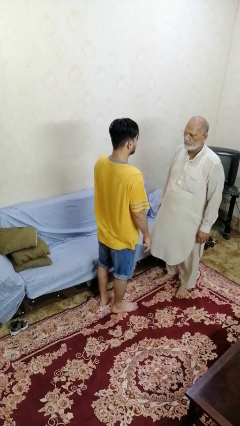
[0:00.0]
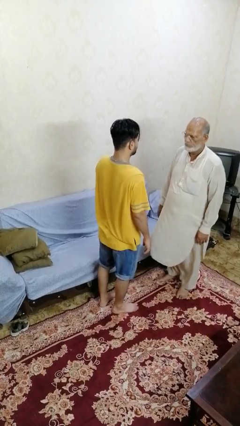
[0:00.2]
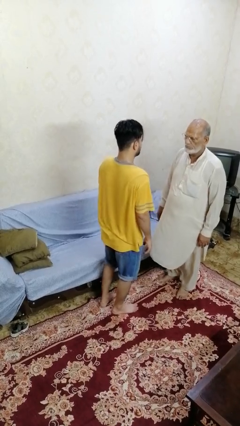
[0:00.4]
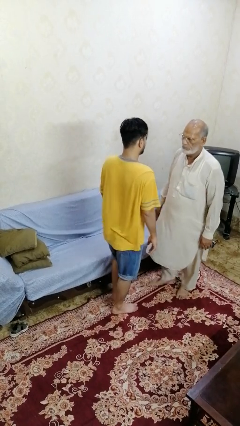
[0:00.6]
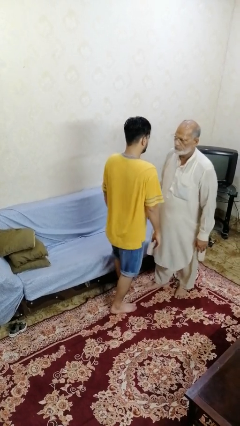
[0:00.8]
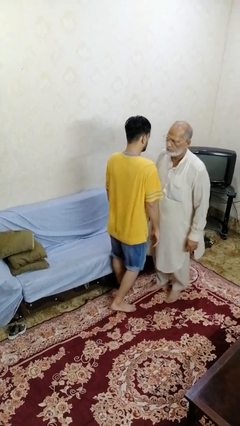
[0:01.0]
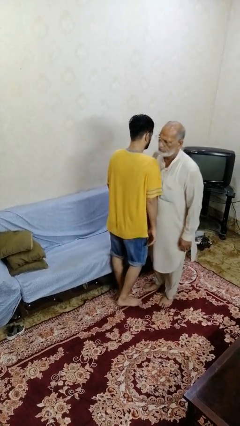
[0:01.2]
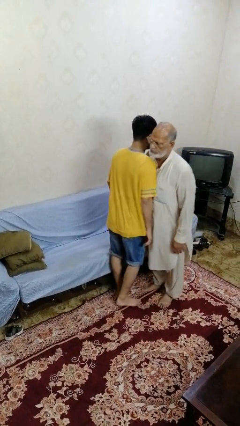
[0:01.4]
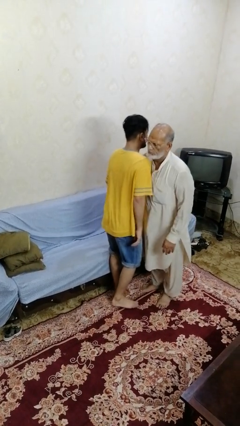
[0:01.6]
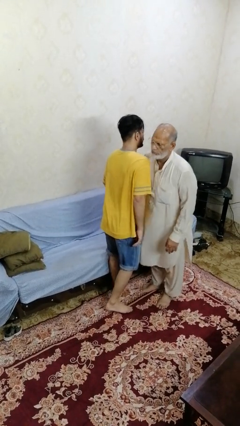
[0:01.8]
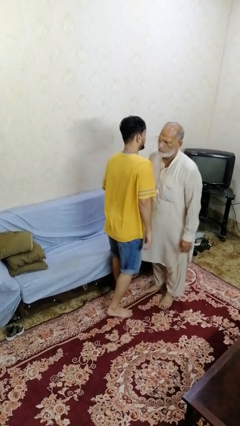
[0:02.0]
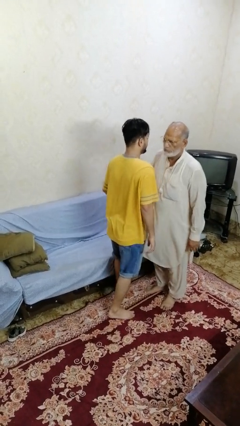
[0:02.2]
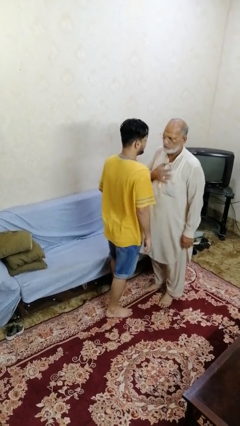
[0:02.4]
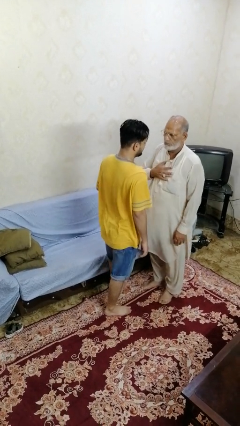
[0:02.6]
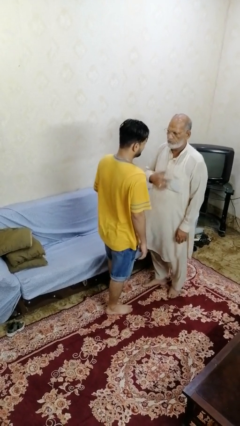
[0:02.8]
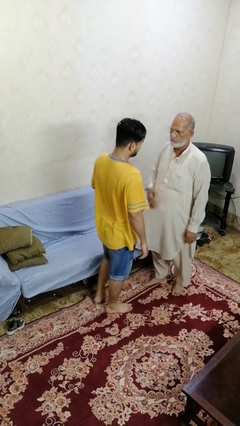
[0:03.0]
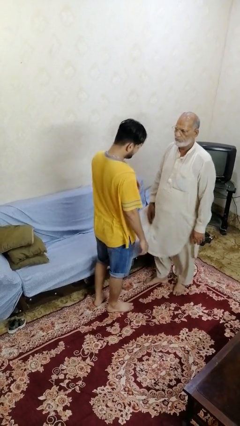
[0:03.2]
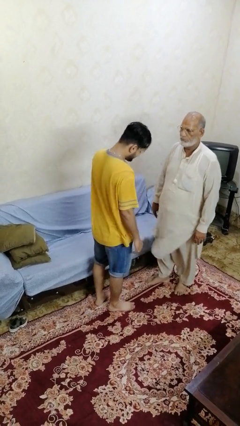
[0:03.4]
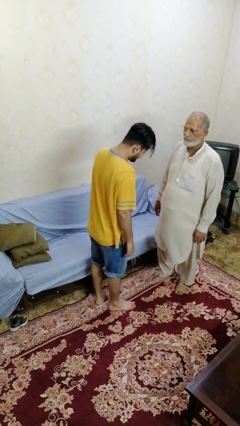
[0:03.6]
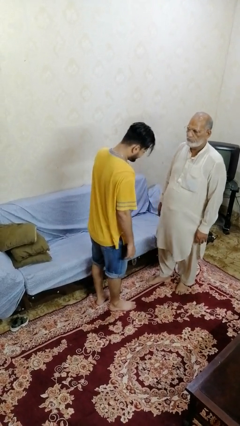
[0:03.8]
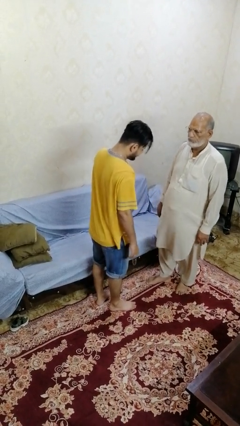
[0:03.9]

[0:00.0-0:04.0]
person bumps into person

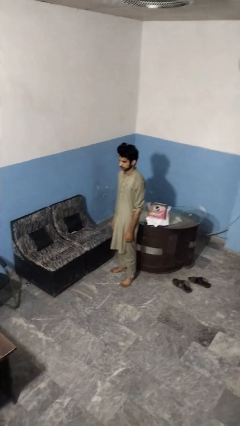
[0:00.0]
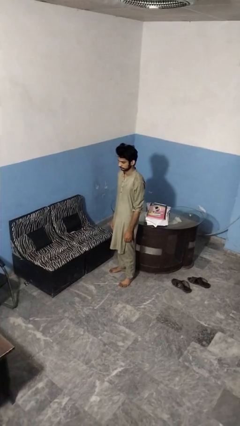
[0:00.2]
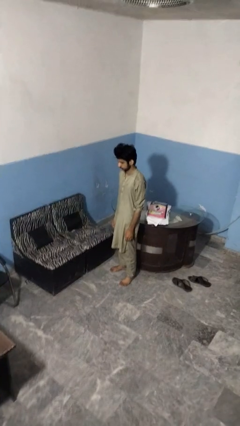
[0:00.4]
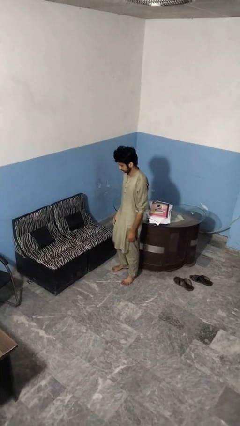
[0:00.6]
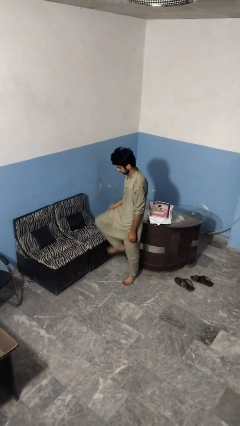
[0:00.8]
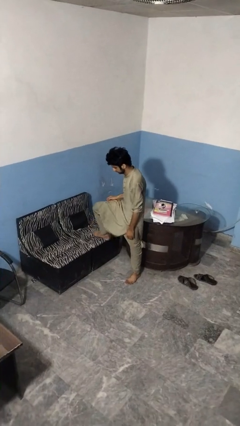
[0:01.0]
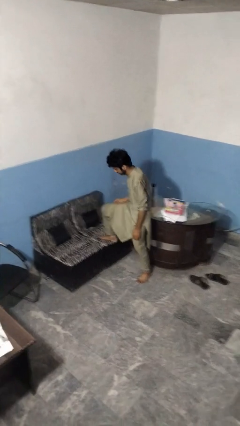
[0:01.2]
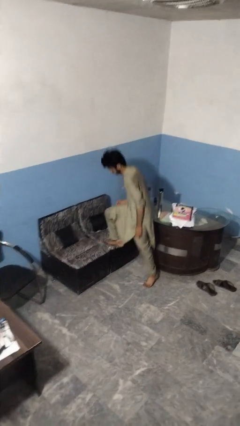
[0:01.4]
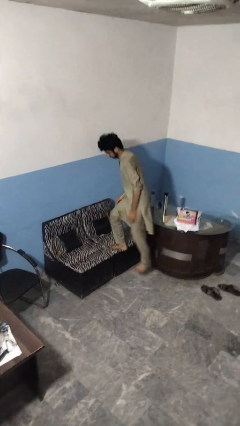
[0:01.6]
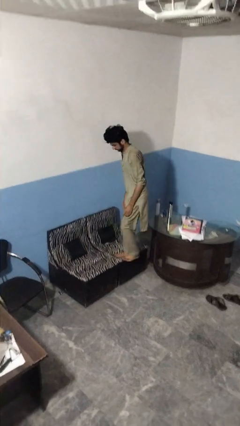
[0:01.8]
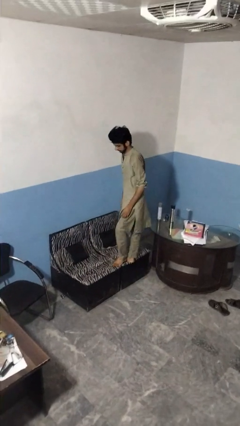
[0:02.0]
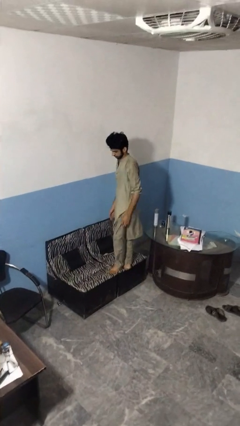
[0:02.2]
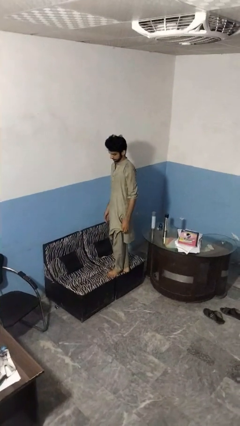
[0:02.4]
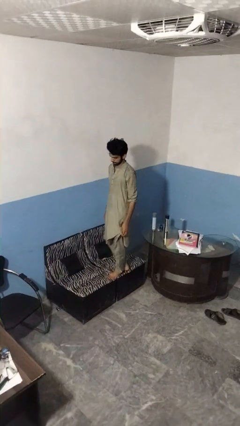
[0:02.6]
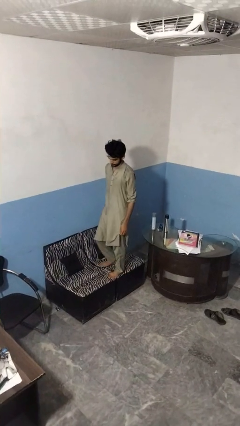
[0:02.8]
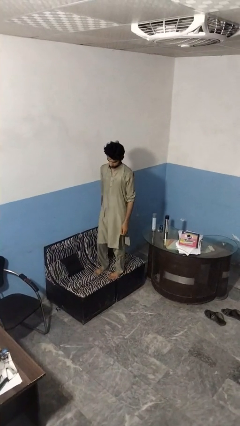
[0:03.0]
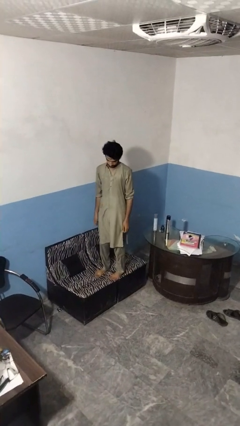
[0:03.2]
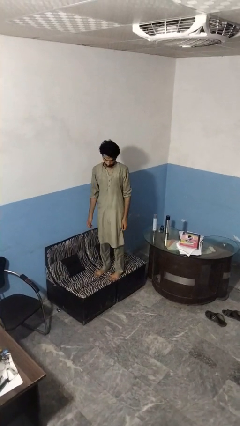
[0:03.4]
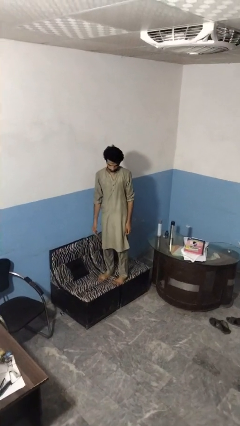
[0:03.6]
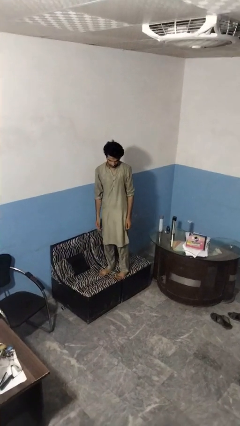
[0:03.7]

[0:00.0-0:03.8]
person climbs on couch

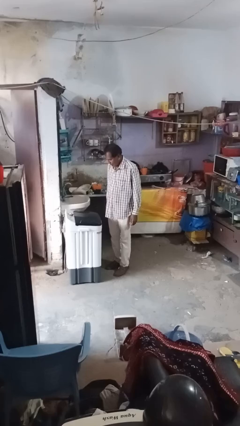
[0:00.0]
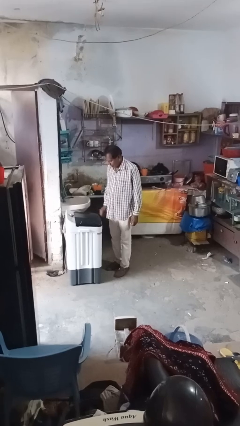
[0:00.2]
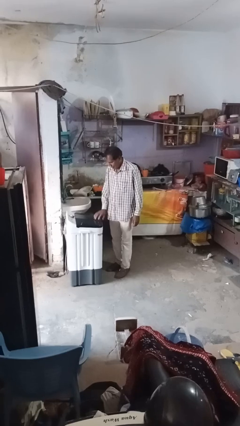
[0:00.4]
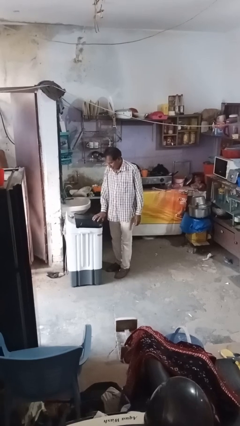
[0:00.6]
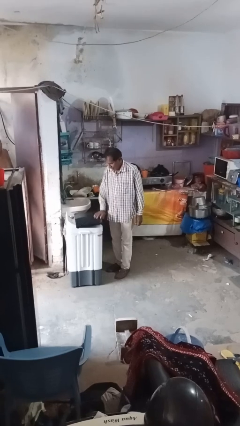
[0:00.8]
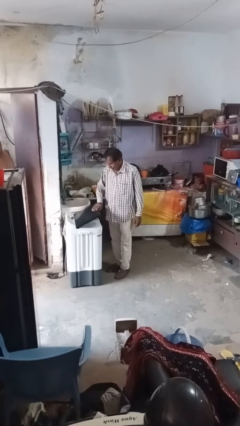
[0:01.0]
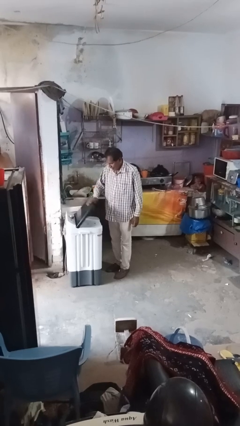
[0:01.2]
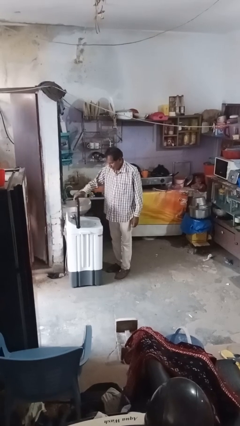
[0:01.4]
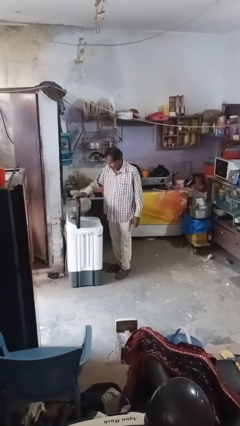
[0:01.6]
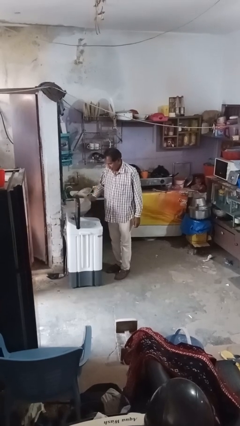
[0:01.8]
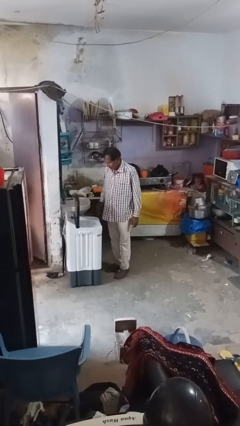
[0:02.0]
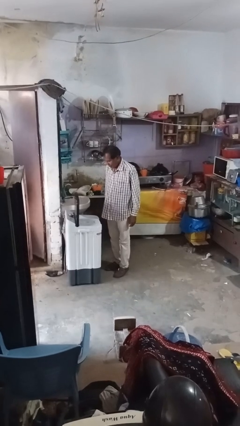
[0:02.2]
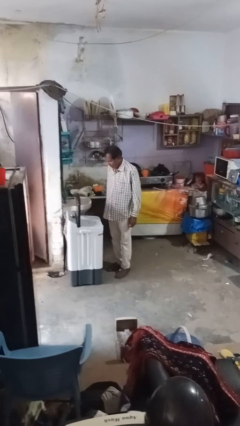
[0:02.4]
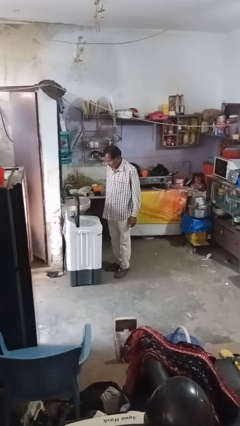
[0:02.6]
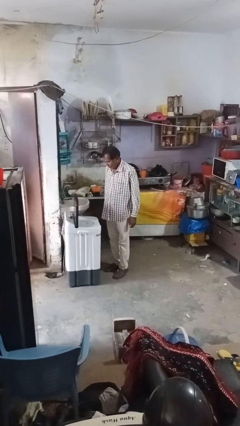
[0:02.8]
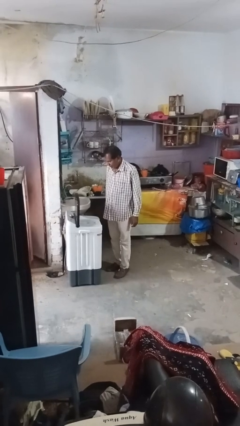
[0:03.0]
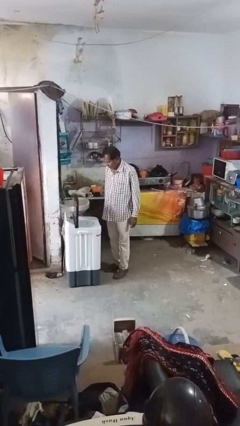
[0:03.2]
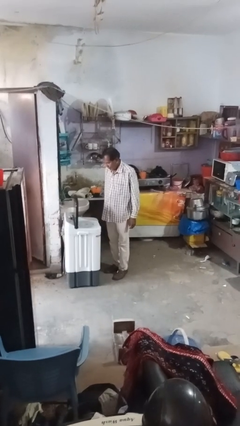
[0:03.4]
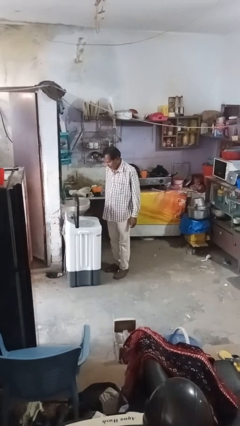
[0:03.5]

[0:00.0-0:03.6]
person opens clothes washer

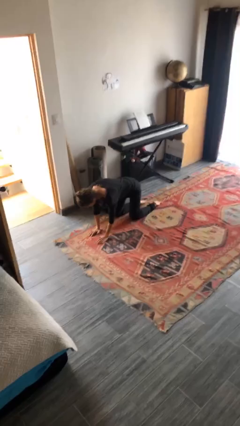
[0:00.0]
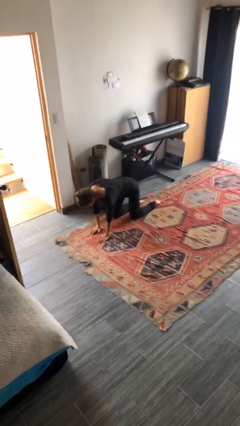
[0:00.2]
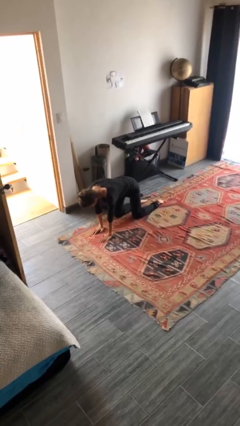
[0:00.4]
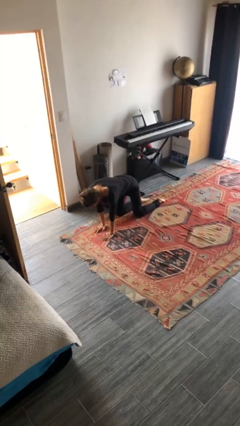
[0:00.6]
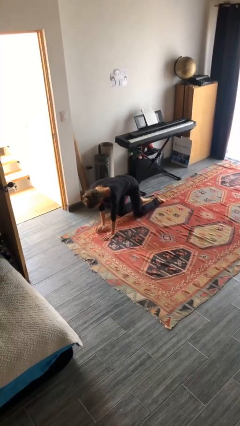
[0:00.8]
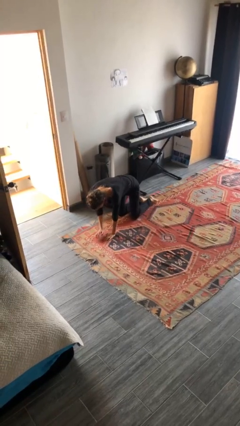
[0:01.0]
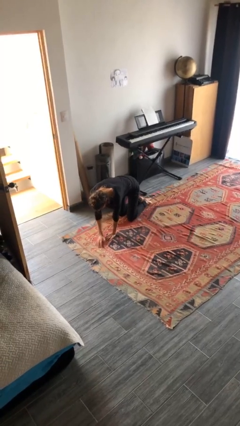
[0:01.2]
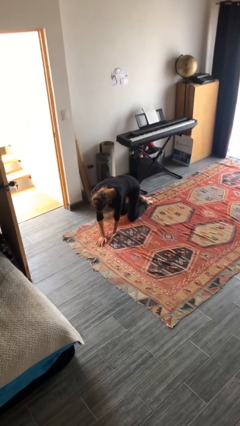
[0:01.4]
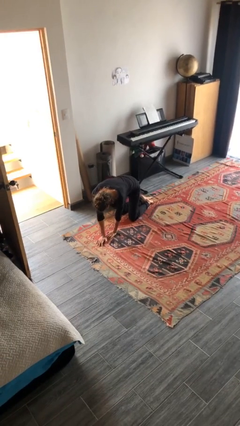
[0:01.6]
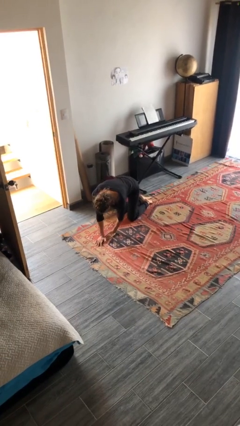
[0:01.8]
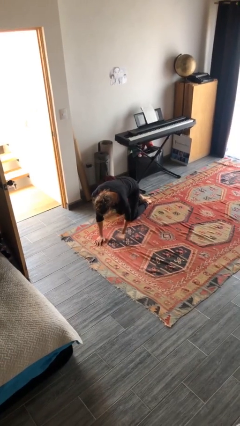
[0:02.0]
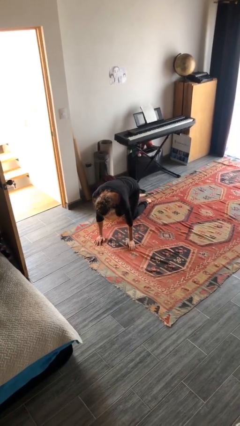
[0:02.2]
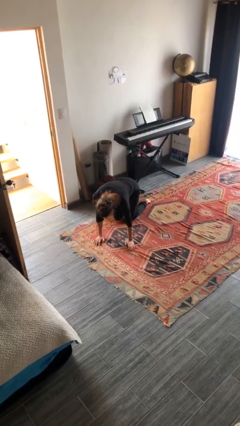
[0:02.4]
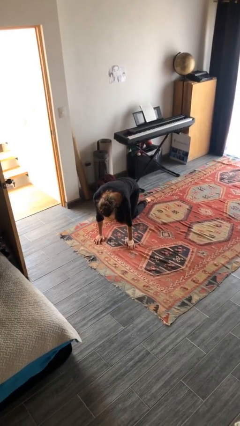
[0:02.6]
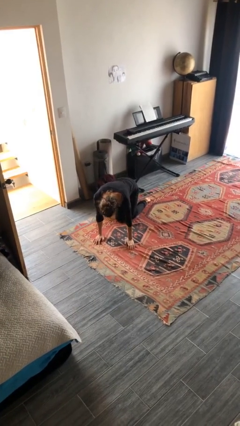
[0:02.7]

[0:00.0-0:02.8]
person crawls

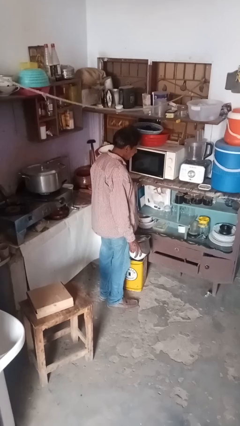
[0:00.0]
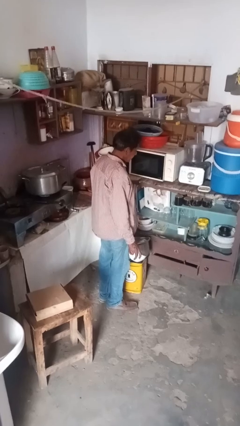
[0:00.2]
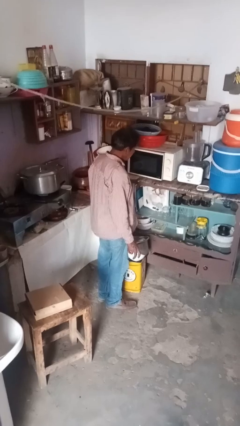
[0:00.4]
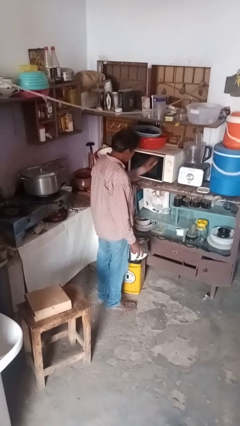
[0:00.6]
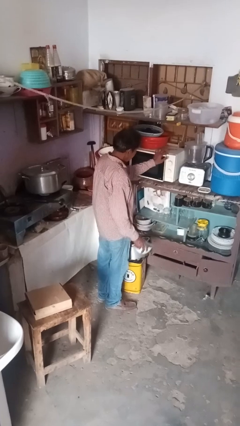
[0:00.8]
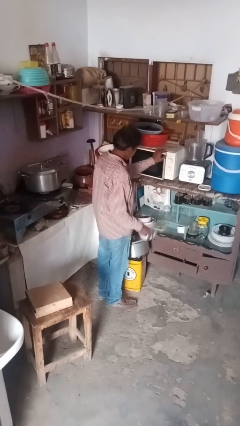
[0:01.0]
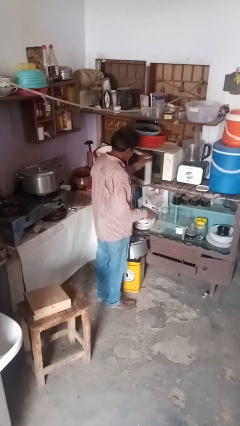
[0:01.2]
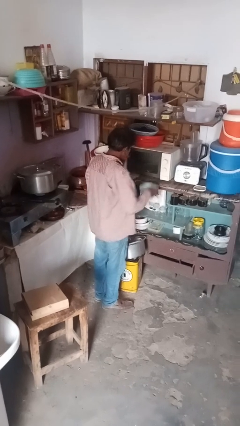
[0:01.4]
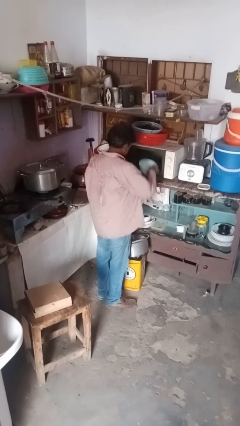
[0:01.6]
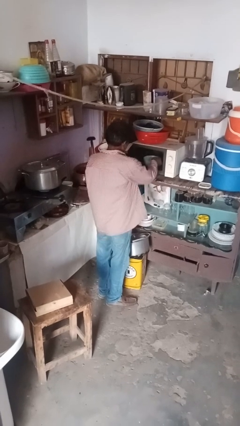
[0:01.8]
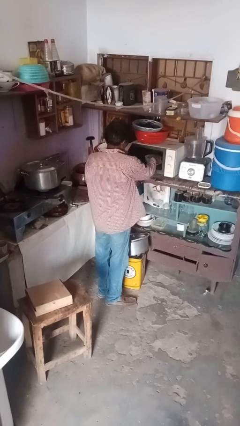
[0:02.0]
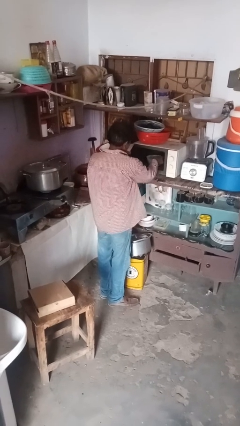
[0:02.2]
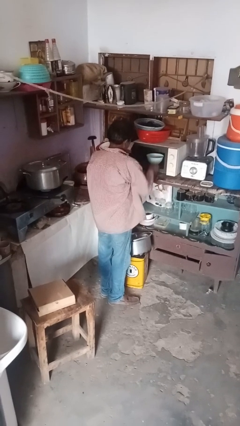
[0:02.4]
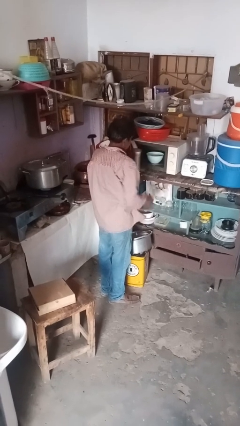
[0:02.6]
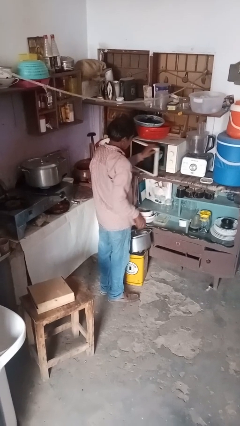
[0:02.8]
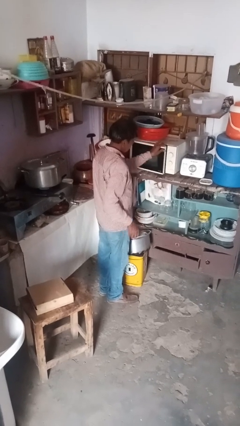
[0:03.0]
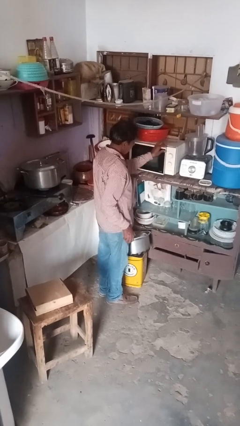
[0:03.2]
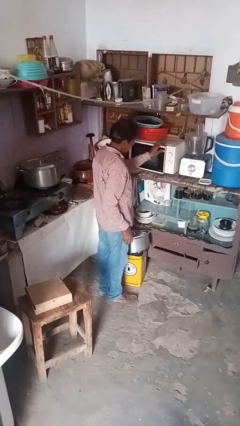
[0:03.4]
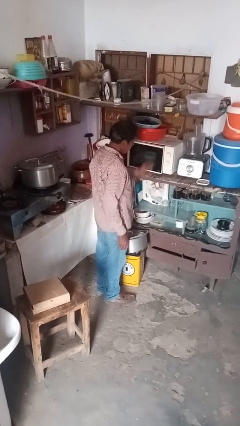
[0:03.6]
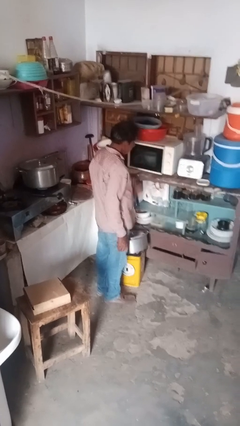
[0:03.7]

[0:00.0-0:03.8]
person puts object into microwave
